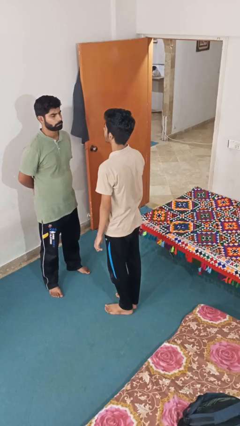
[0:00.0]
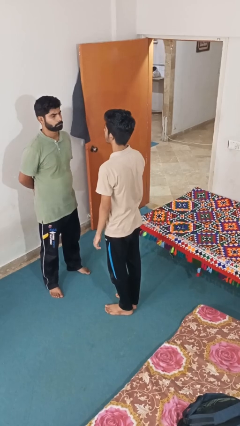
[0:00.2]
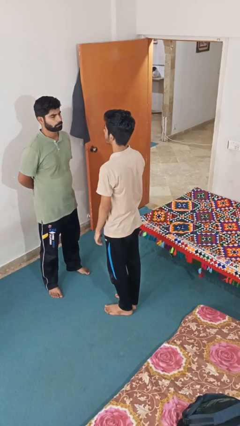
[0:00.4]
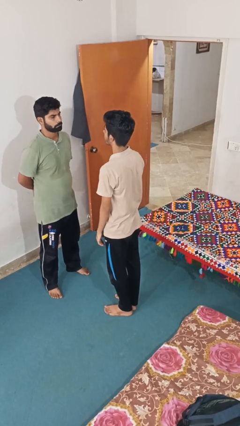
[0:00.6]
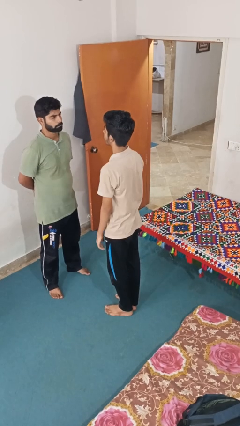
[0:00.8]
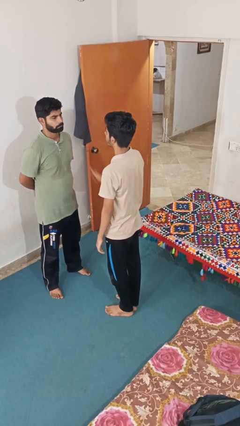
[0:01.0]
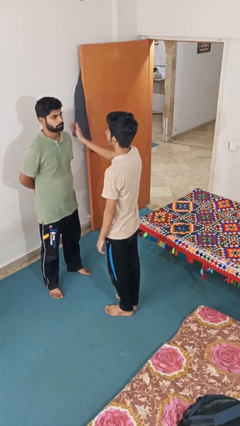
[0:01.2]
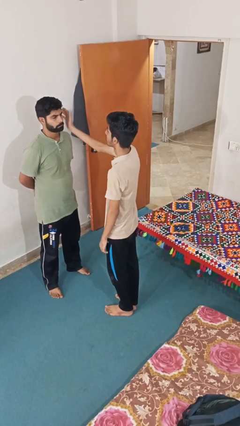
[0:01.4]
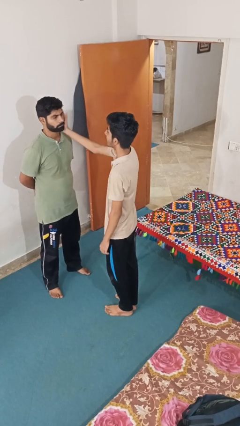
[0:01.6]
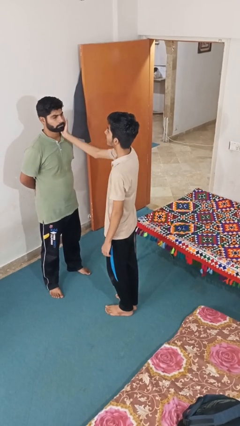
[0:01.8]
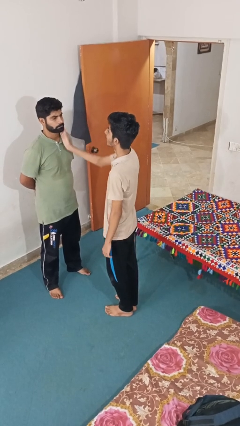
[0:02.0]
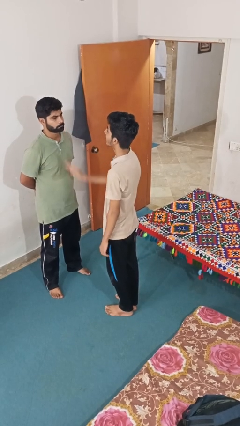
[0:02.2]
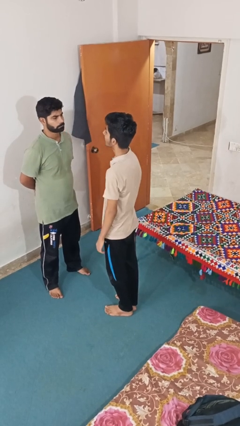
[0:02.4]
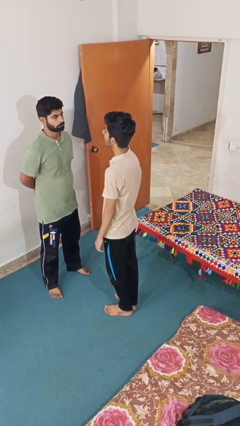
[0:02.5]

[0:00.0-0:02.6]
person touches face of person

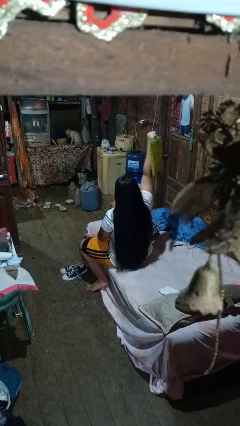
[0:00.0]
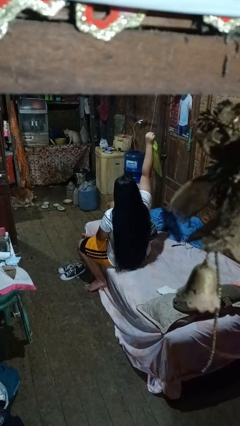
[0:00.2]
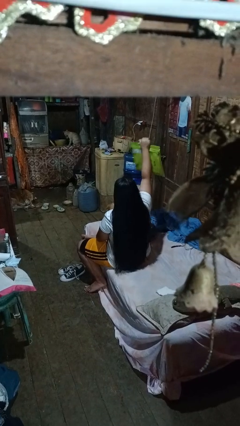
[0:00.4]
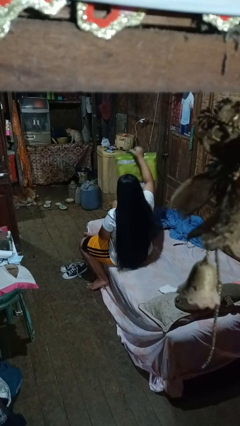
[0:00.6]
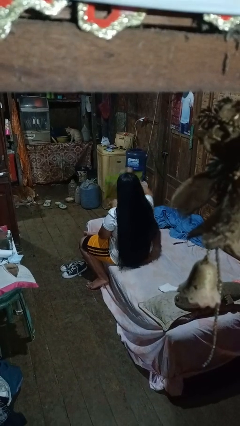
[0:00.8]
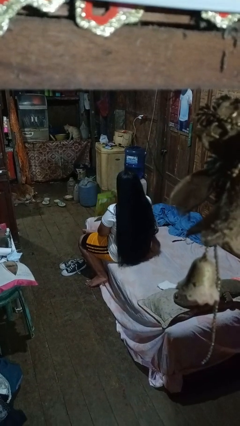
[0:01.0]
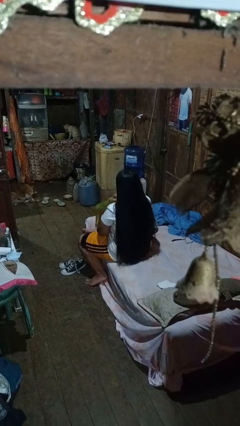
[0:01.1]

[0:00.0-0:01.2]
person holds object above head

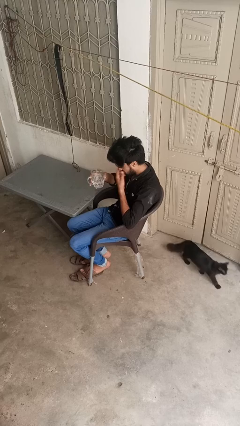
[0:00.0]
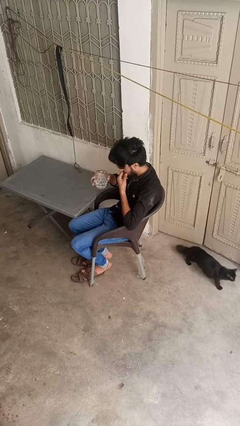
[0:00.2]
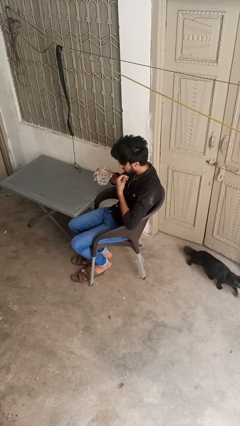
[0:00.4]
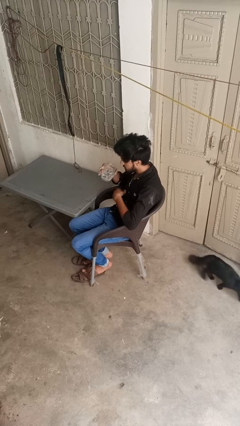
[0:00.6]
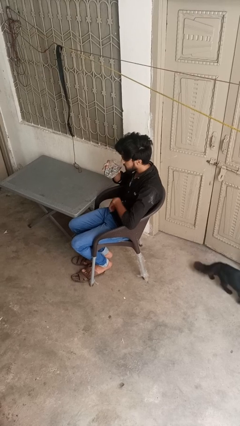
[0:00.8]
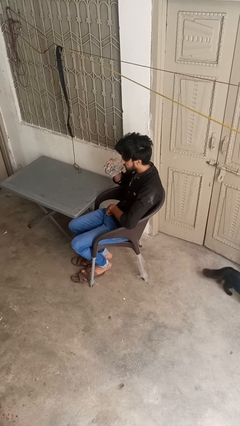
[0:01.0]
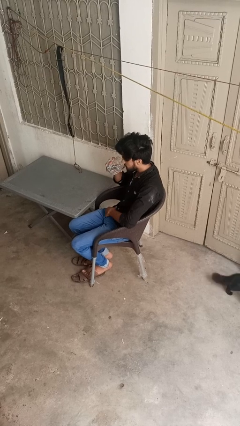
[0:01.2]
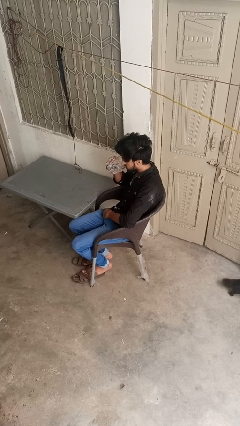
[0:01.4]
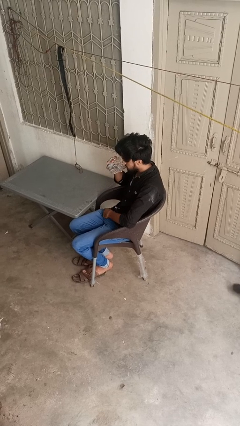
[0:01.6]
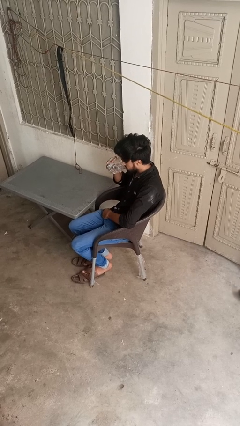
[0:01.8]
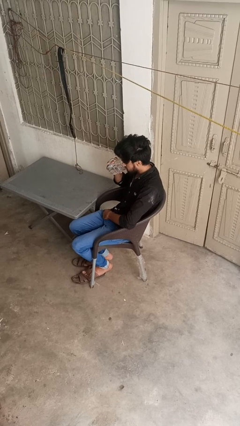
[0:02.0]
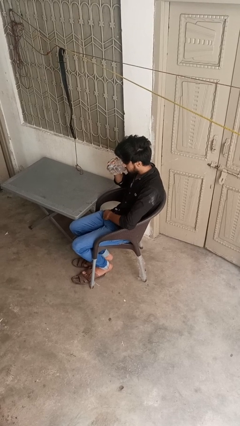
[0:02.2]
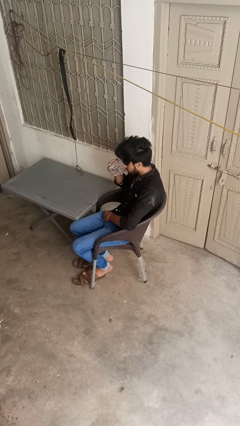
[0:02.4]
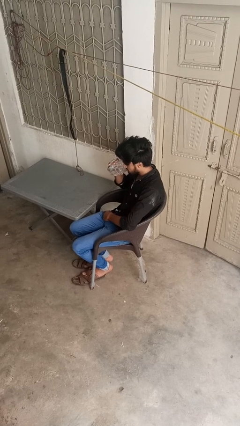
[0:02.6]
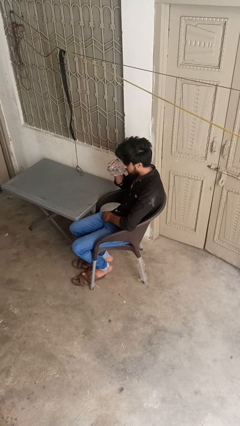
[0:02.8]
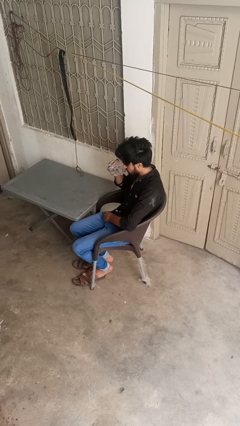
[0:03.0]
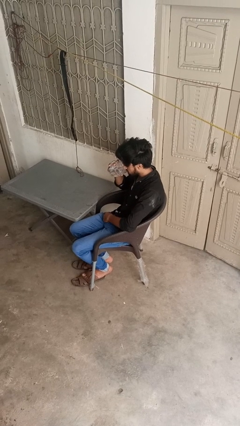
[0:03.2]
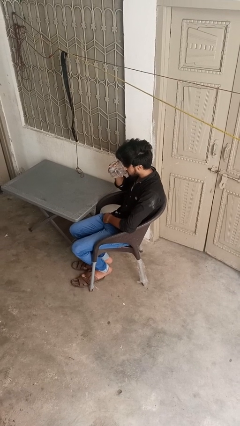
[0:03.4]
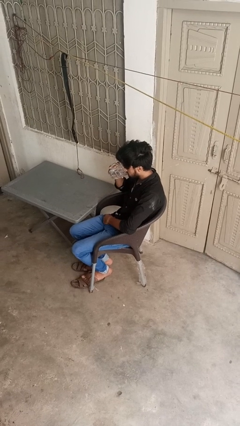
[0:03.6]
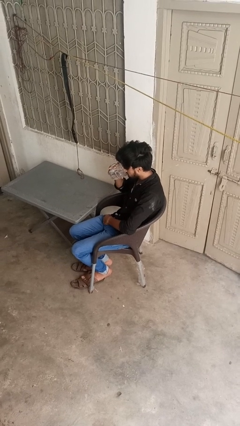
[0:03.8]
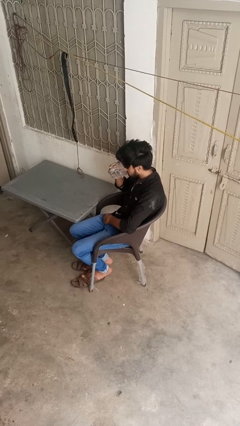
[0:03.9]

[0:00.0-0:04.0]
person drinks from mug

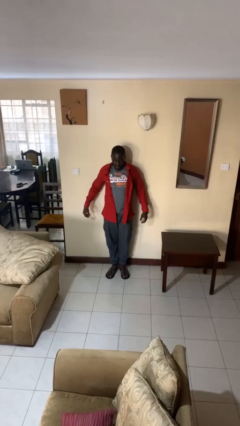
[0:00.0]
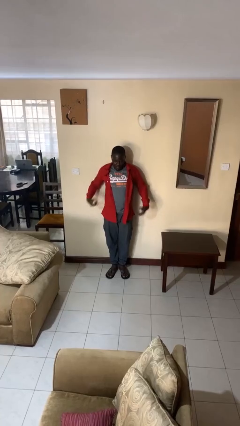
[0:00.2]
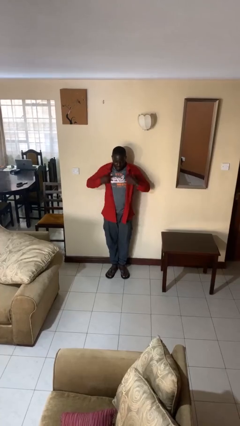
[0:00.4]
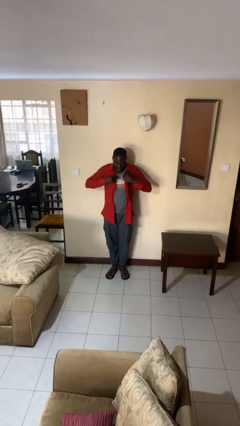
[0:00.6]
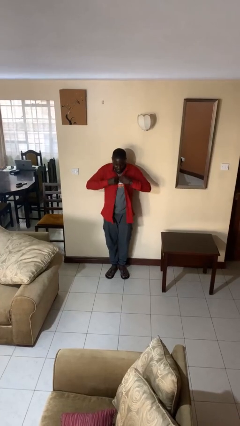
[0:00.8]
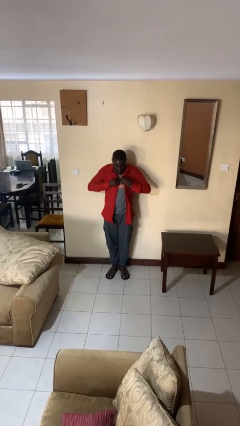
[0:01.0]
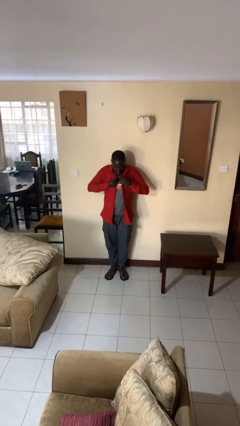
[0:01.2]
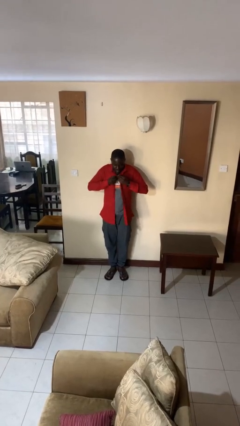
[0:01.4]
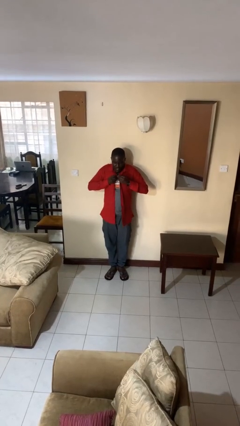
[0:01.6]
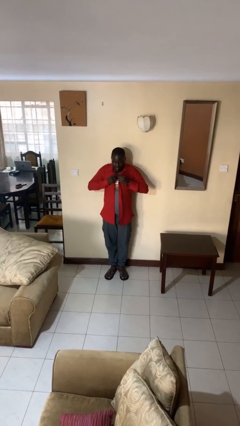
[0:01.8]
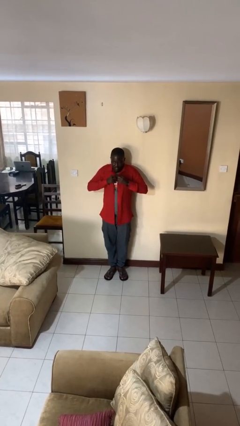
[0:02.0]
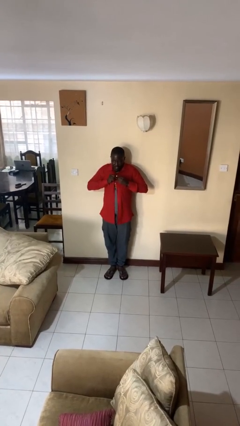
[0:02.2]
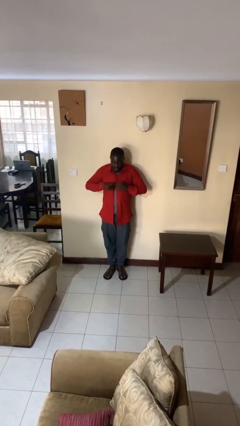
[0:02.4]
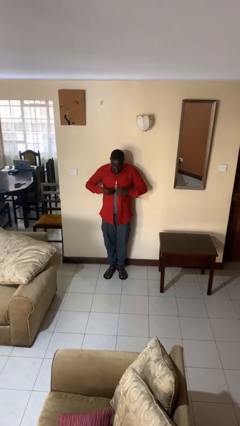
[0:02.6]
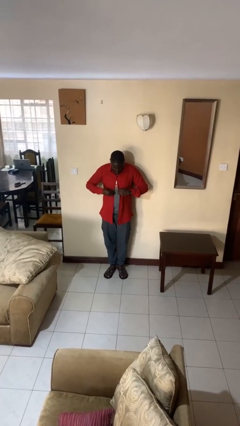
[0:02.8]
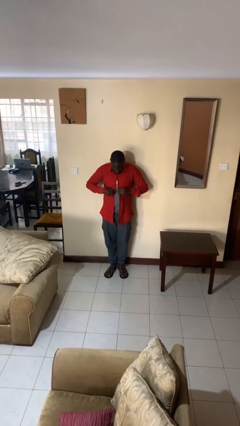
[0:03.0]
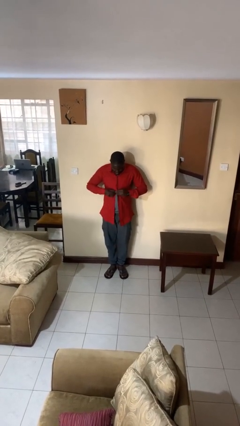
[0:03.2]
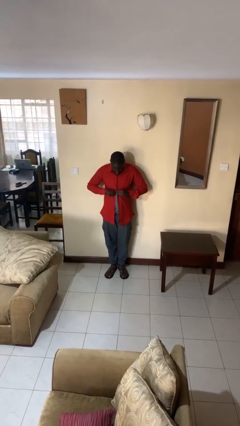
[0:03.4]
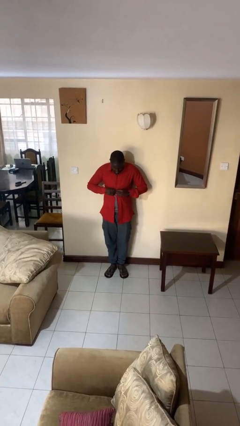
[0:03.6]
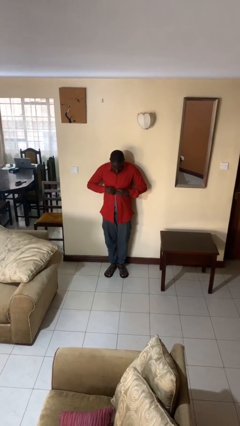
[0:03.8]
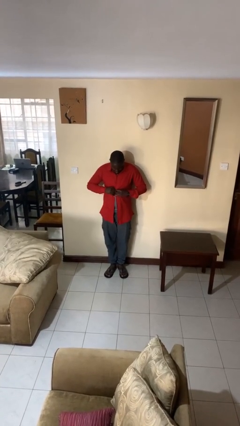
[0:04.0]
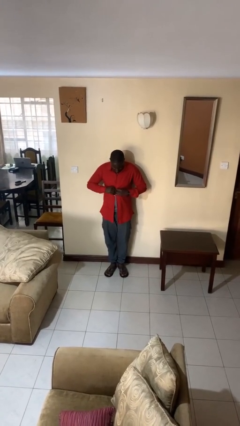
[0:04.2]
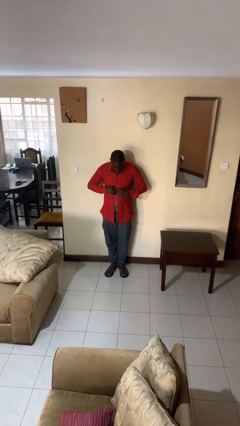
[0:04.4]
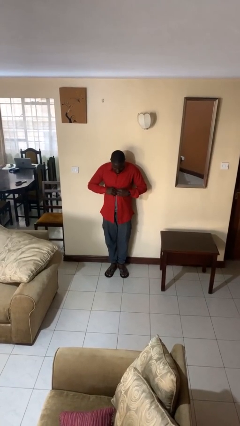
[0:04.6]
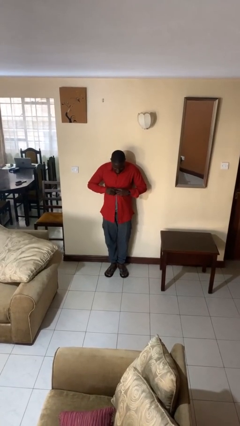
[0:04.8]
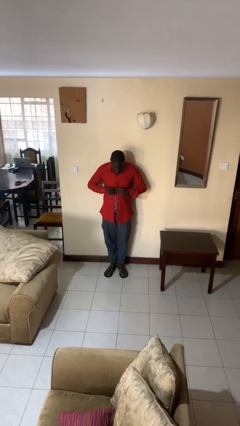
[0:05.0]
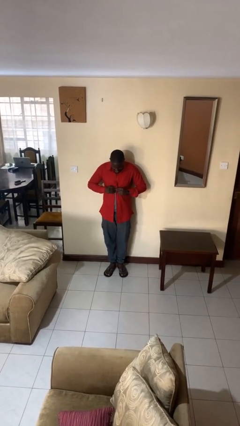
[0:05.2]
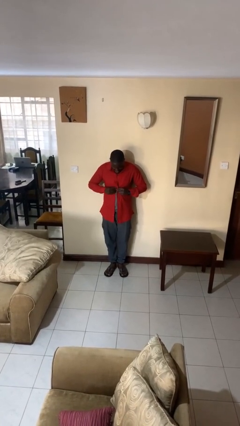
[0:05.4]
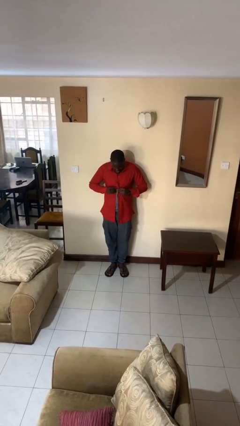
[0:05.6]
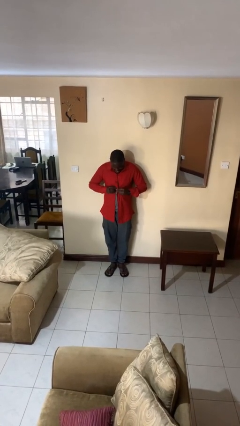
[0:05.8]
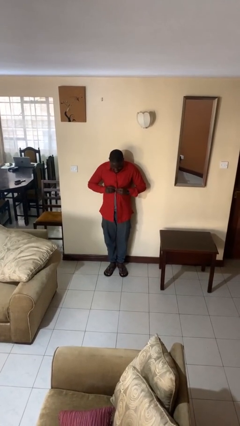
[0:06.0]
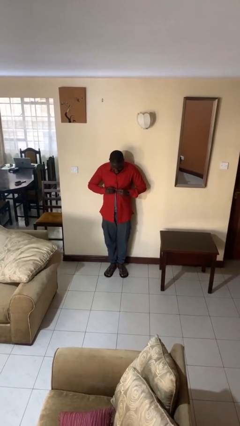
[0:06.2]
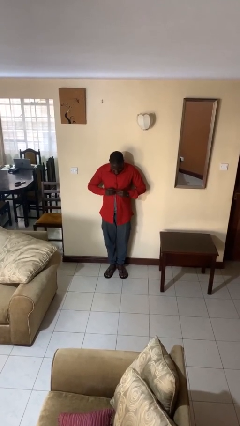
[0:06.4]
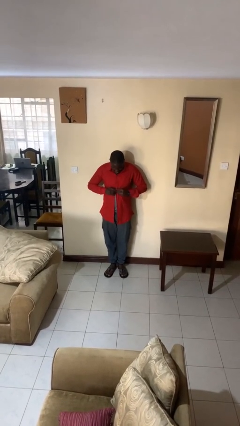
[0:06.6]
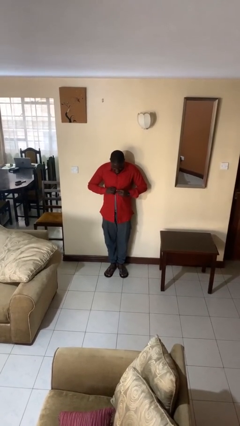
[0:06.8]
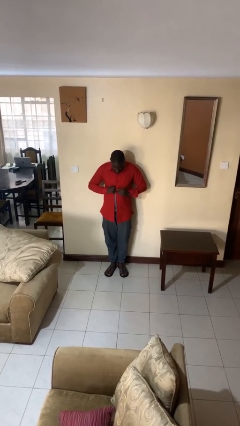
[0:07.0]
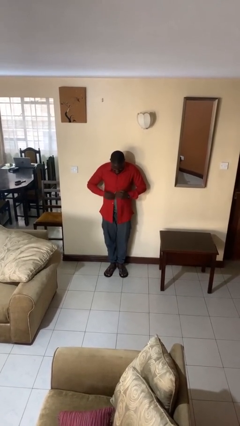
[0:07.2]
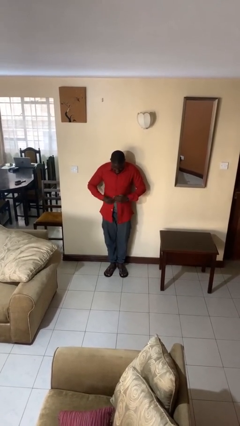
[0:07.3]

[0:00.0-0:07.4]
person buttons shirt

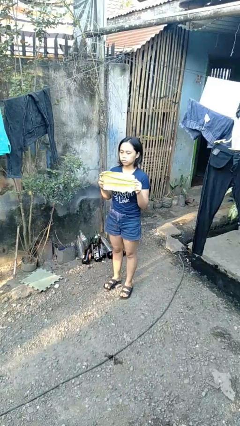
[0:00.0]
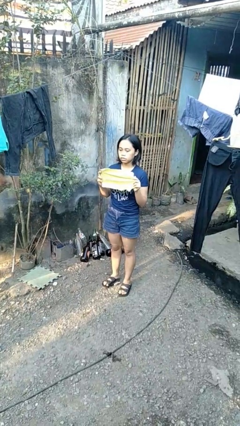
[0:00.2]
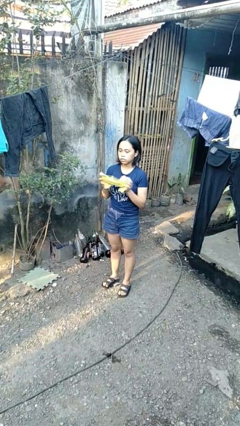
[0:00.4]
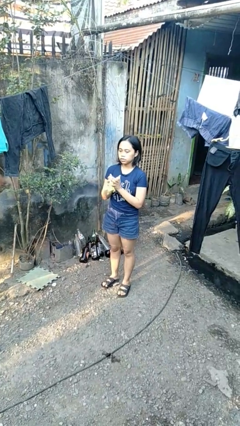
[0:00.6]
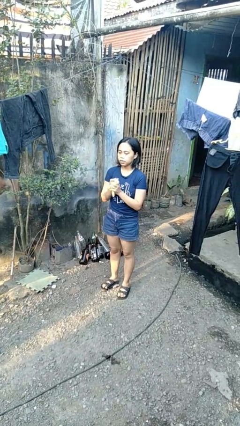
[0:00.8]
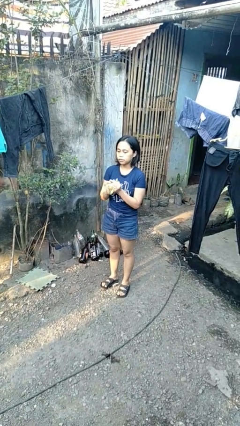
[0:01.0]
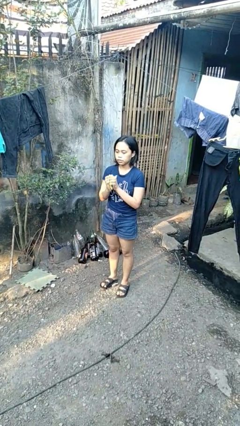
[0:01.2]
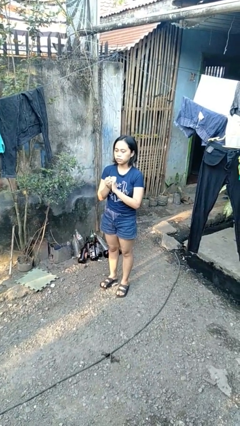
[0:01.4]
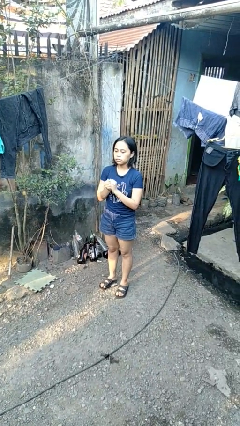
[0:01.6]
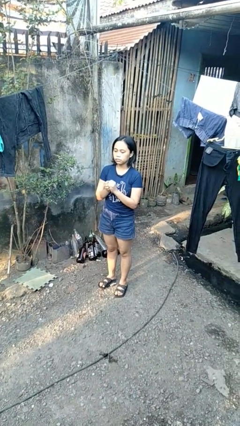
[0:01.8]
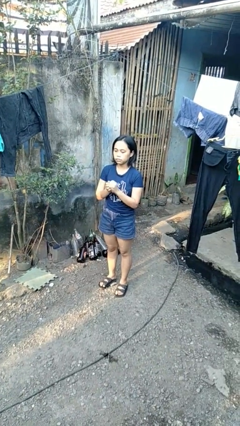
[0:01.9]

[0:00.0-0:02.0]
person crumples paper

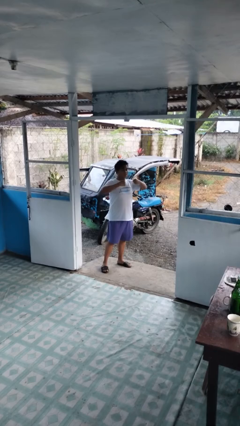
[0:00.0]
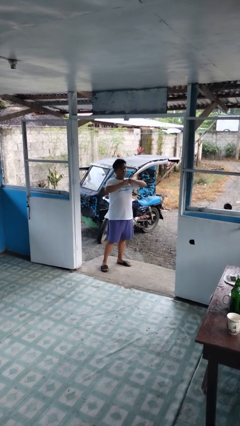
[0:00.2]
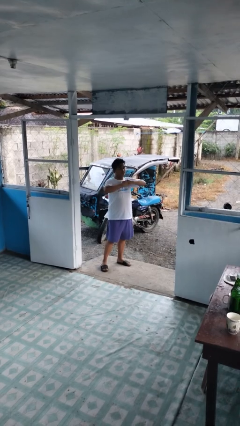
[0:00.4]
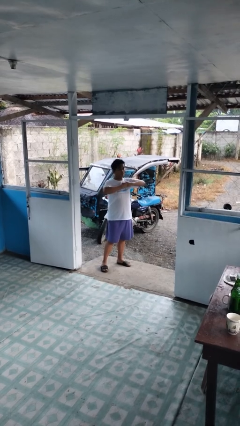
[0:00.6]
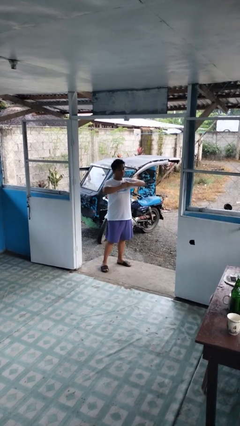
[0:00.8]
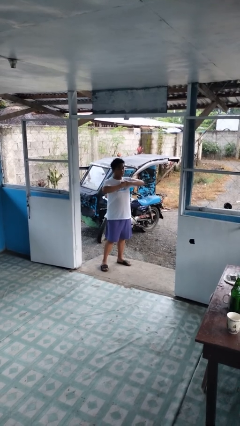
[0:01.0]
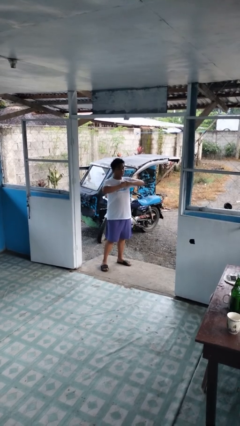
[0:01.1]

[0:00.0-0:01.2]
person gestures zoom out
